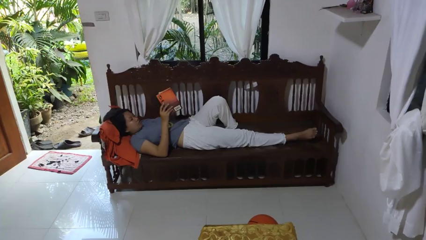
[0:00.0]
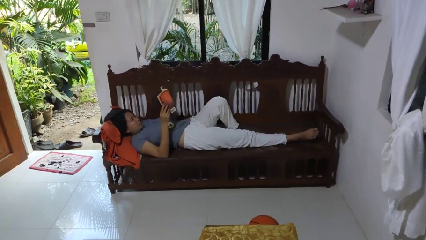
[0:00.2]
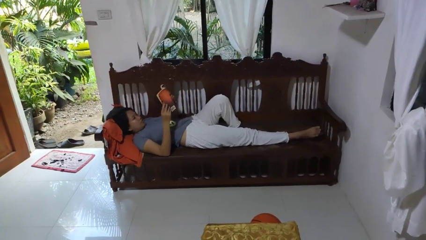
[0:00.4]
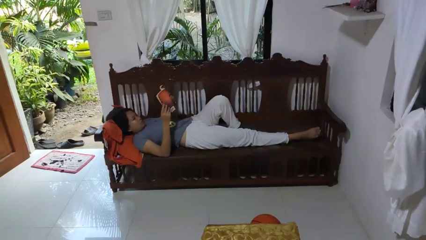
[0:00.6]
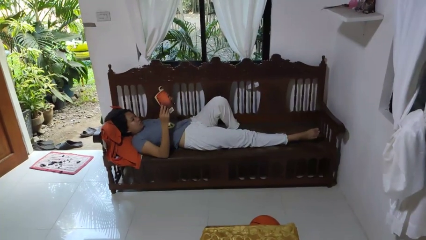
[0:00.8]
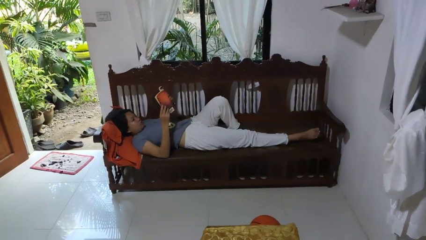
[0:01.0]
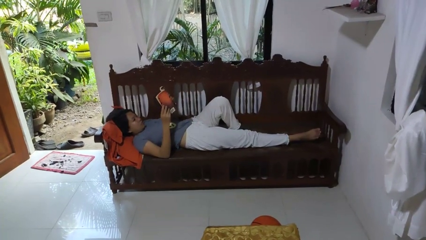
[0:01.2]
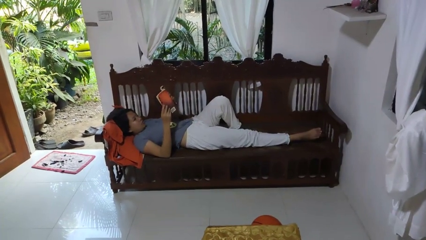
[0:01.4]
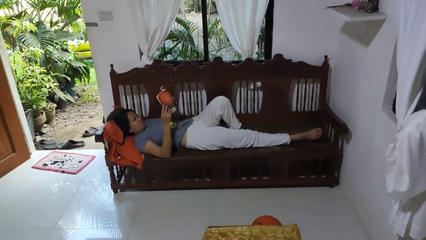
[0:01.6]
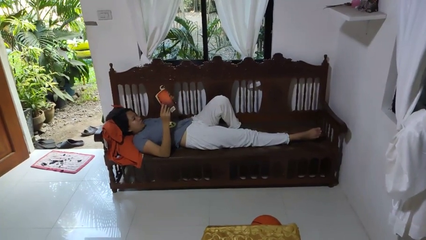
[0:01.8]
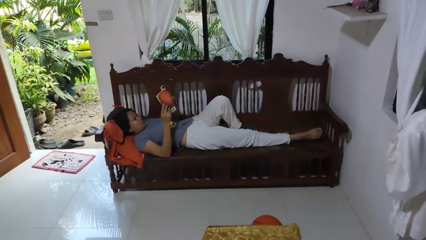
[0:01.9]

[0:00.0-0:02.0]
person reads book

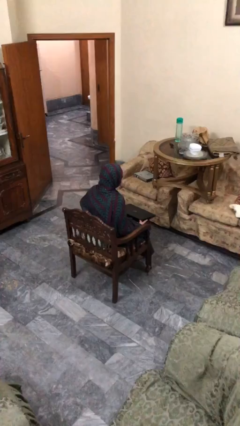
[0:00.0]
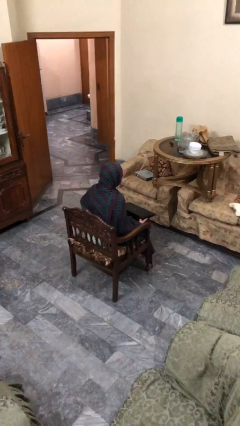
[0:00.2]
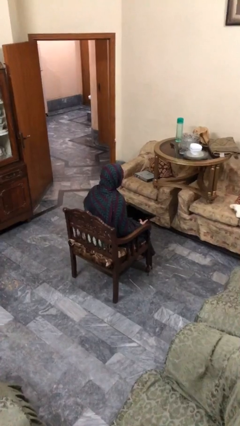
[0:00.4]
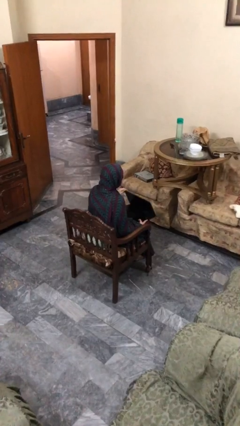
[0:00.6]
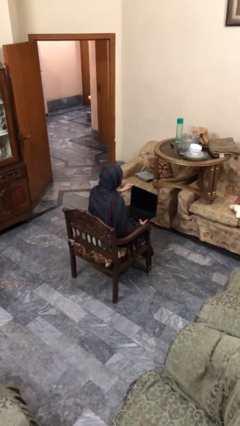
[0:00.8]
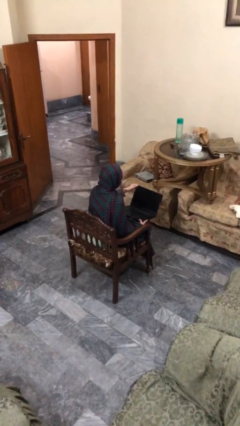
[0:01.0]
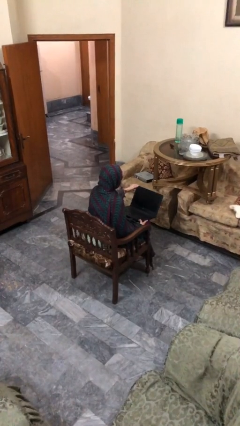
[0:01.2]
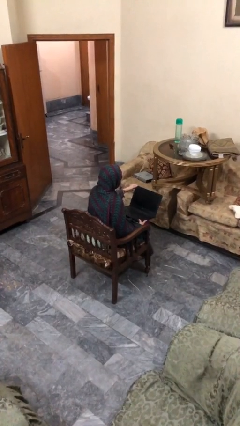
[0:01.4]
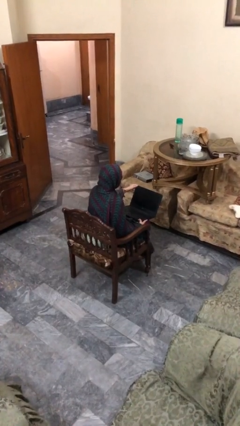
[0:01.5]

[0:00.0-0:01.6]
person opens laptop

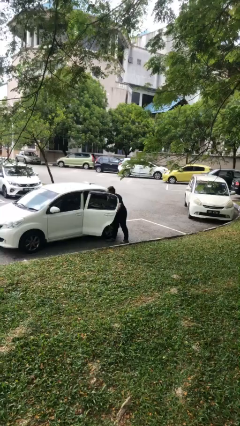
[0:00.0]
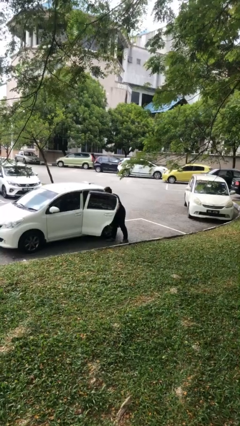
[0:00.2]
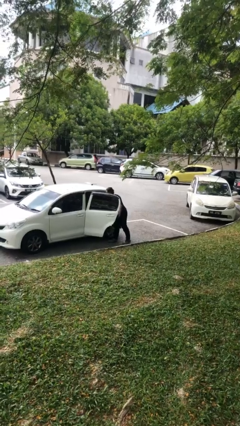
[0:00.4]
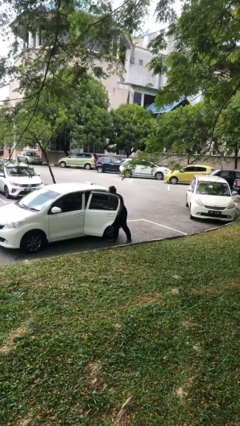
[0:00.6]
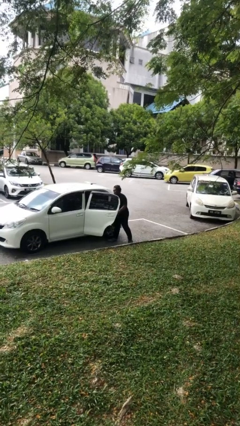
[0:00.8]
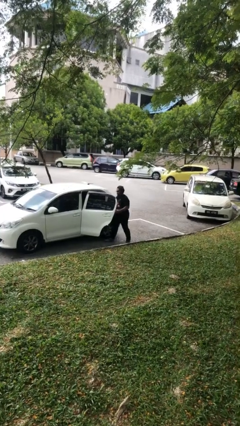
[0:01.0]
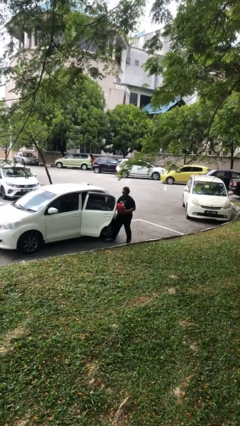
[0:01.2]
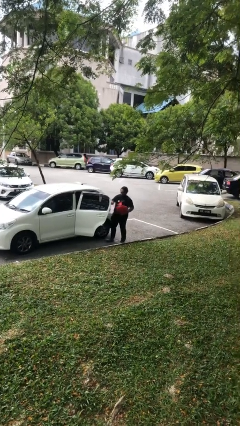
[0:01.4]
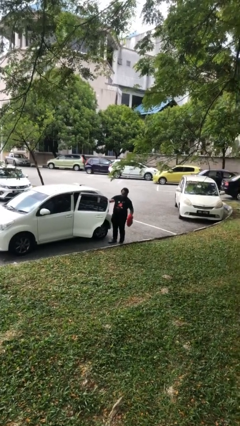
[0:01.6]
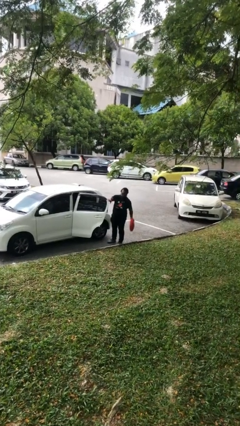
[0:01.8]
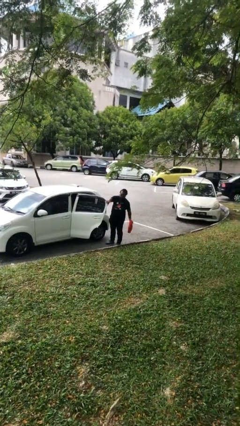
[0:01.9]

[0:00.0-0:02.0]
person unloads car

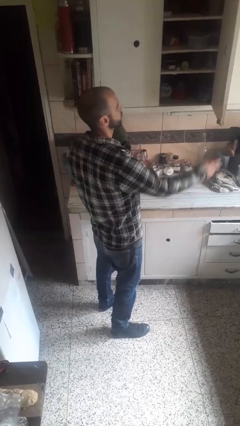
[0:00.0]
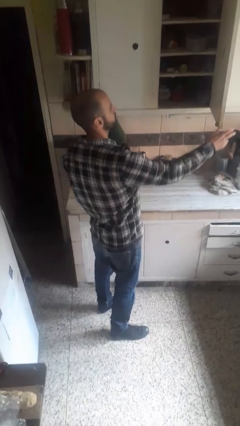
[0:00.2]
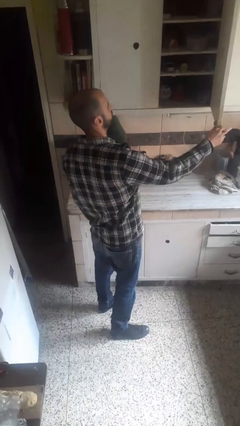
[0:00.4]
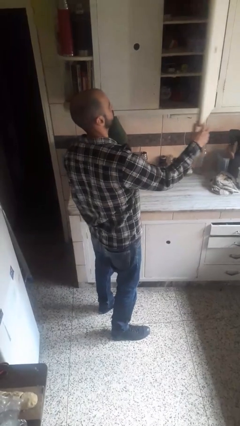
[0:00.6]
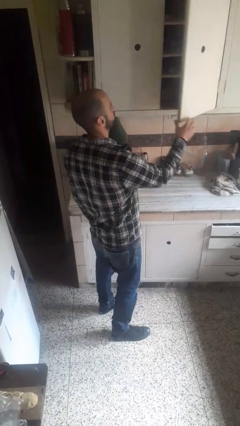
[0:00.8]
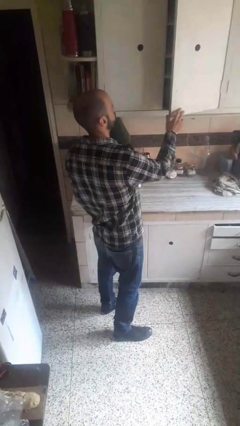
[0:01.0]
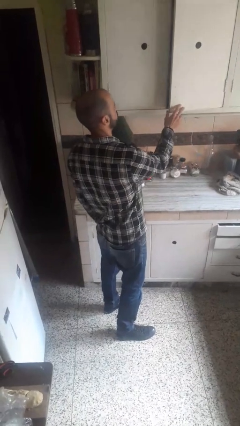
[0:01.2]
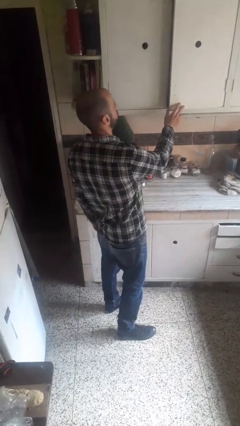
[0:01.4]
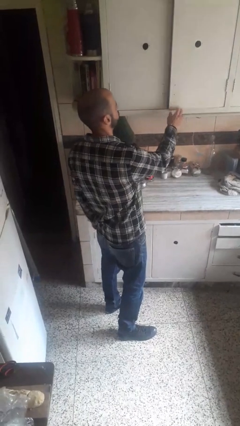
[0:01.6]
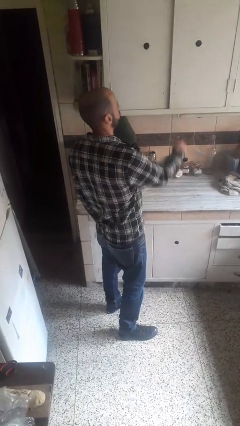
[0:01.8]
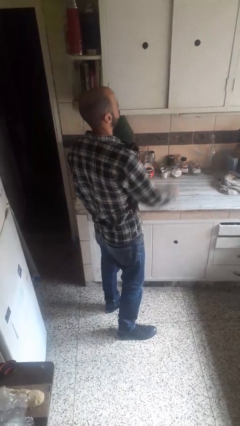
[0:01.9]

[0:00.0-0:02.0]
person closes closet door

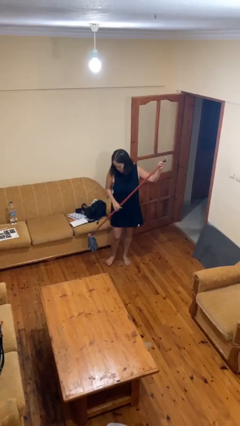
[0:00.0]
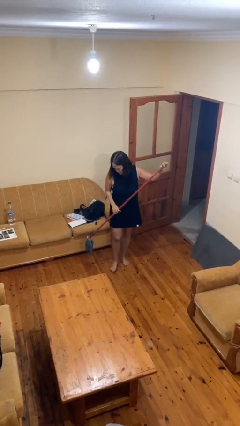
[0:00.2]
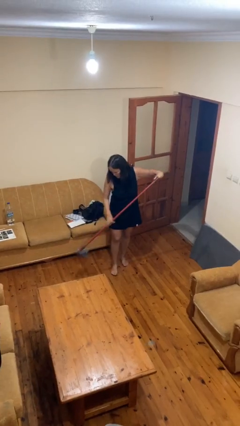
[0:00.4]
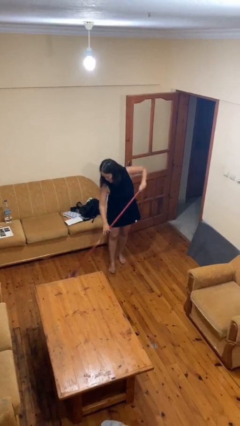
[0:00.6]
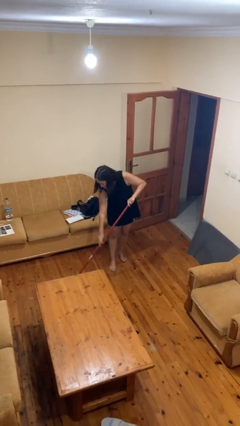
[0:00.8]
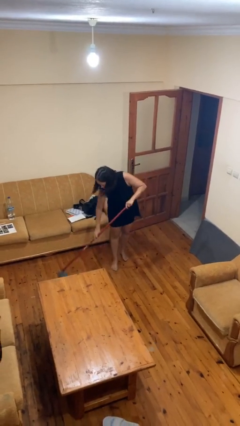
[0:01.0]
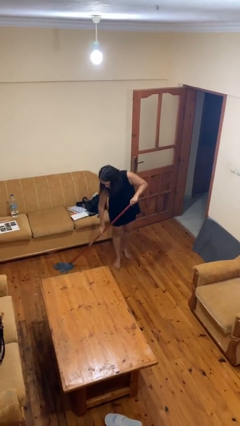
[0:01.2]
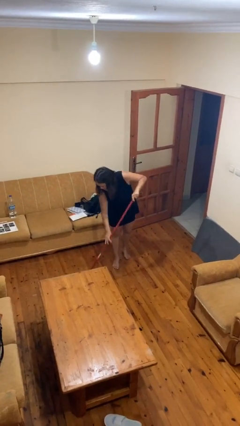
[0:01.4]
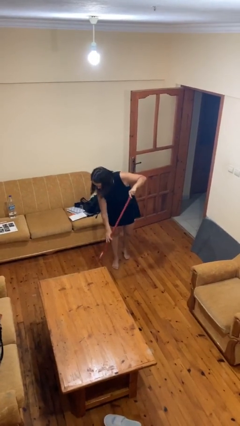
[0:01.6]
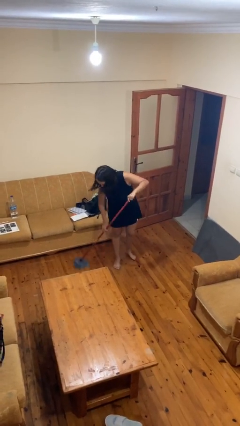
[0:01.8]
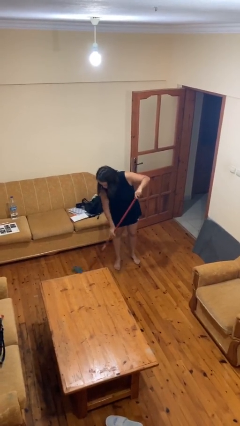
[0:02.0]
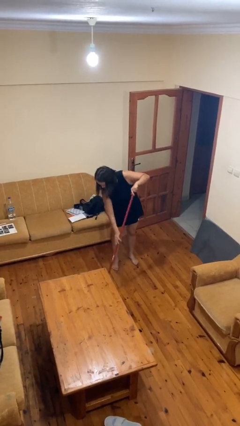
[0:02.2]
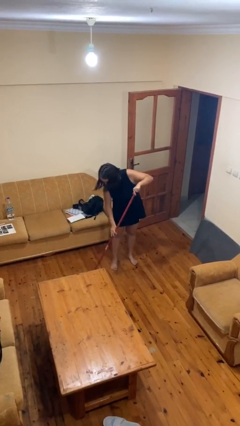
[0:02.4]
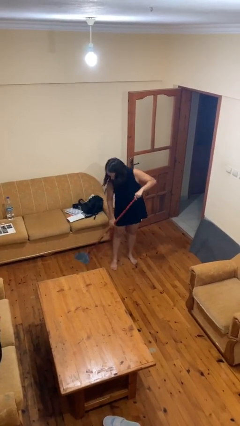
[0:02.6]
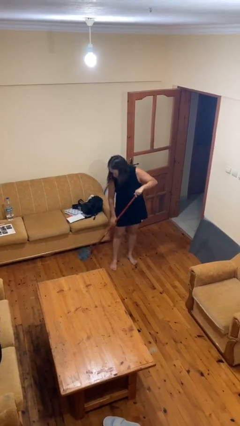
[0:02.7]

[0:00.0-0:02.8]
person mops

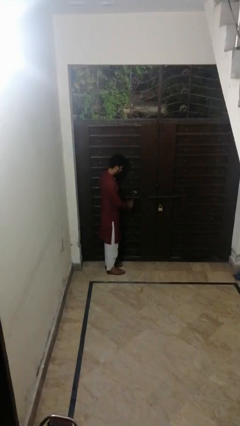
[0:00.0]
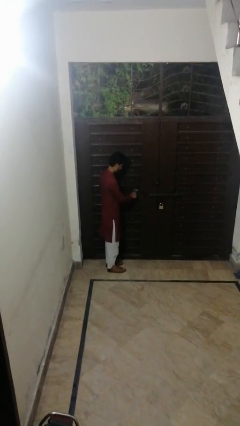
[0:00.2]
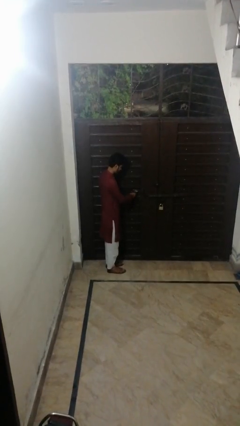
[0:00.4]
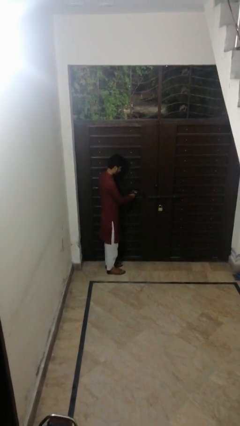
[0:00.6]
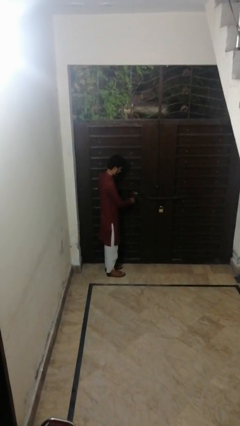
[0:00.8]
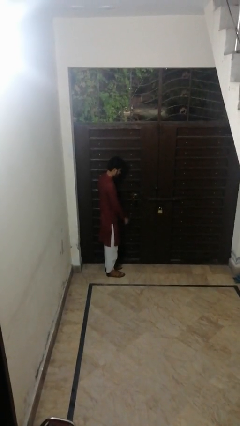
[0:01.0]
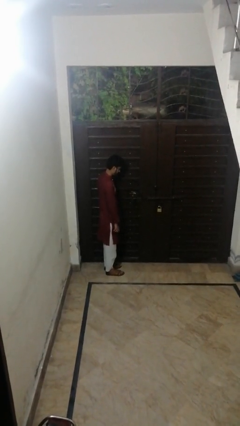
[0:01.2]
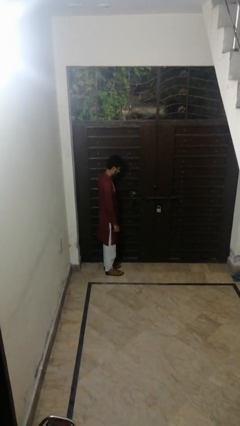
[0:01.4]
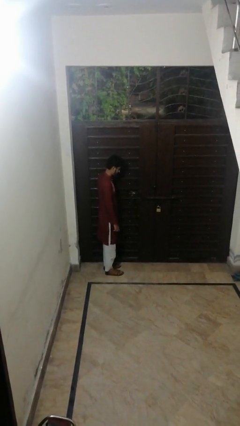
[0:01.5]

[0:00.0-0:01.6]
person locks door with keys

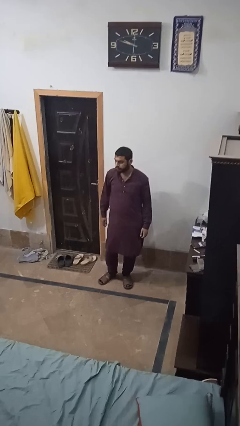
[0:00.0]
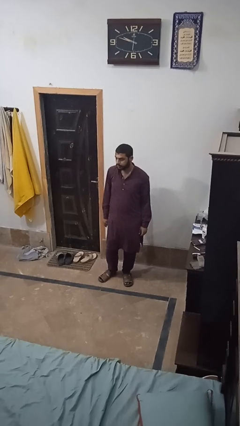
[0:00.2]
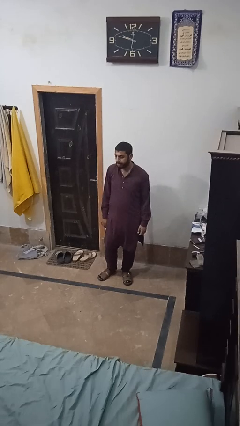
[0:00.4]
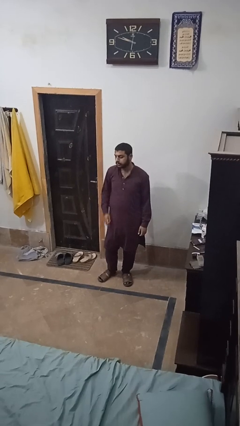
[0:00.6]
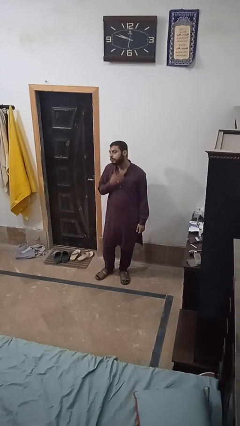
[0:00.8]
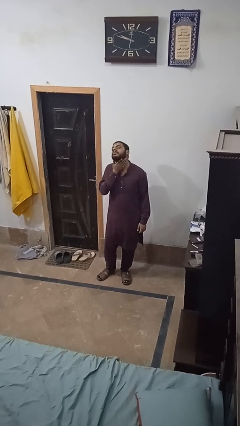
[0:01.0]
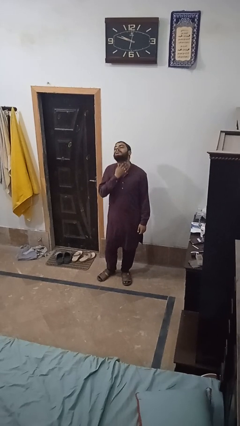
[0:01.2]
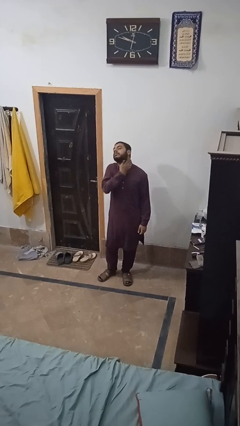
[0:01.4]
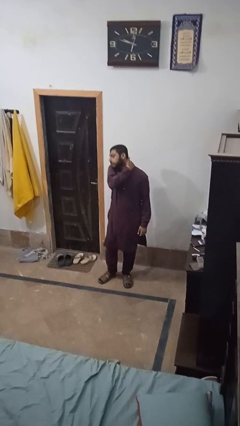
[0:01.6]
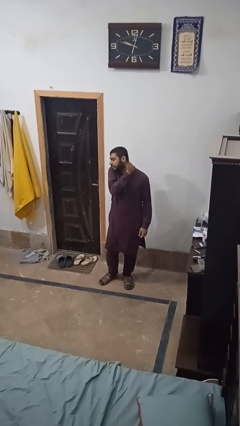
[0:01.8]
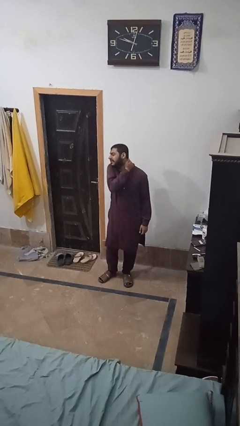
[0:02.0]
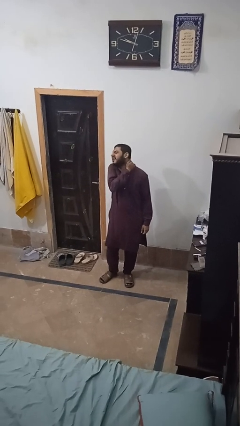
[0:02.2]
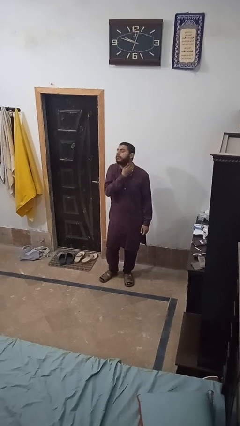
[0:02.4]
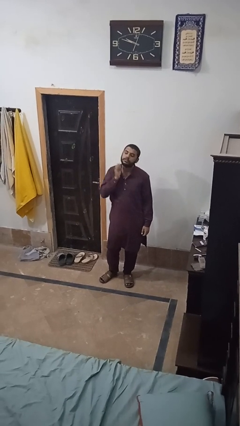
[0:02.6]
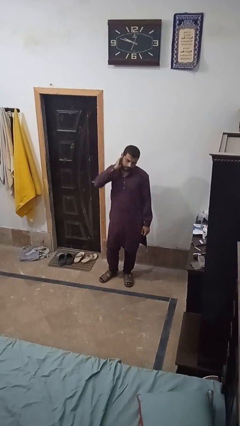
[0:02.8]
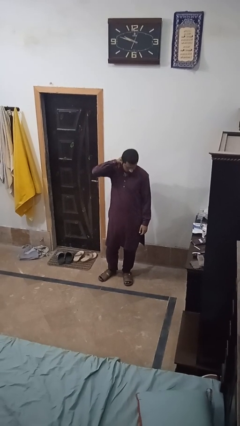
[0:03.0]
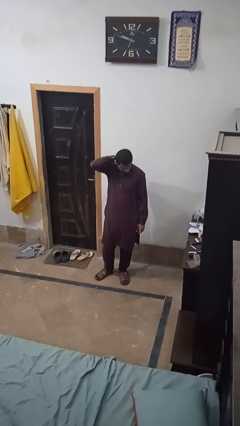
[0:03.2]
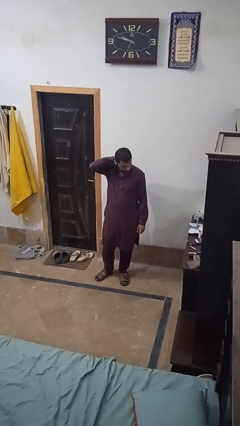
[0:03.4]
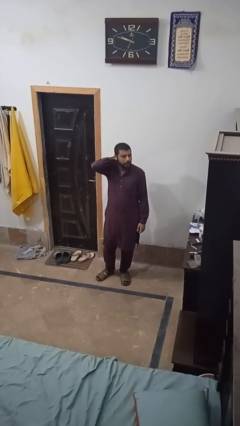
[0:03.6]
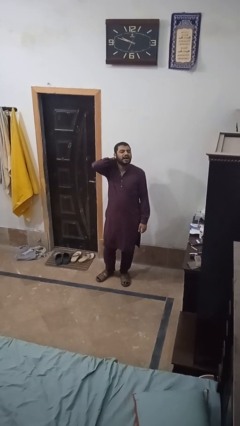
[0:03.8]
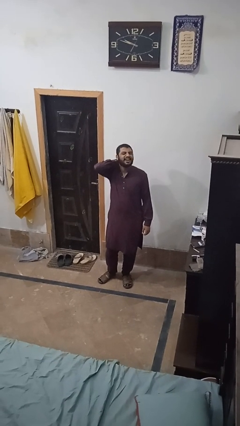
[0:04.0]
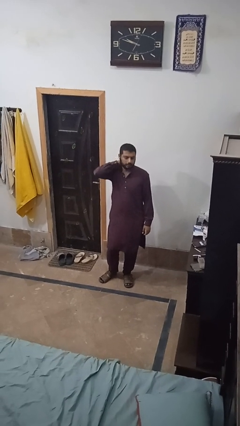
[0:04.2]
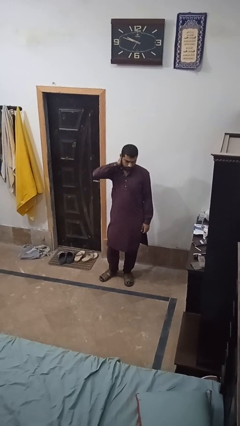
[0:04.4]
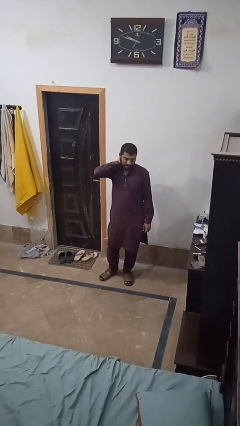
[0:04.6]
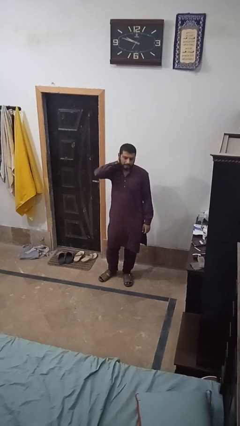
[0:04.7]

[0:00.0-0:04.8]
person rubs neck
